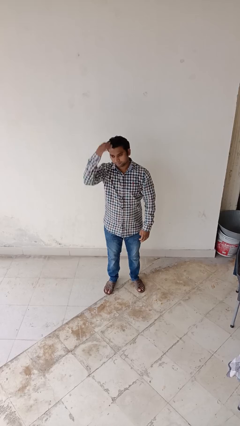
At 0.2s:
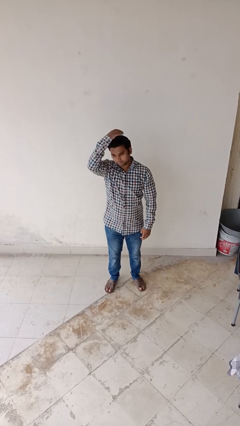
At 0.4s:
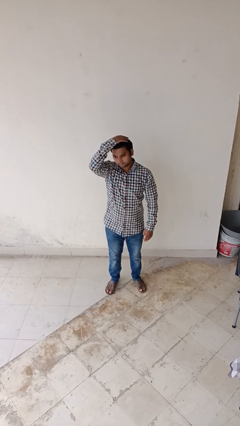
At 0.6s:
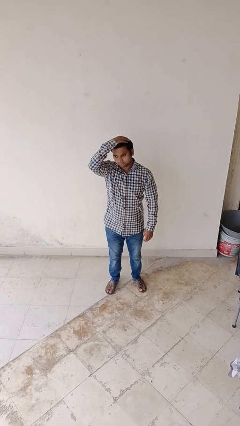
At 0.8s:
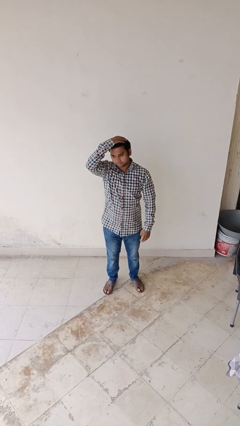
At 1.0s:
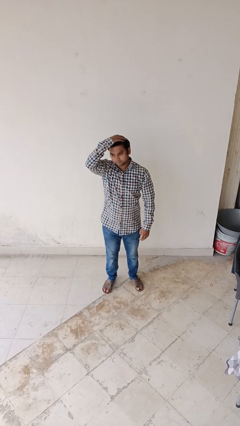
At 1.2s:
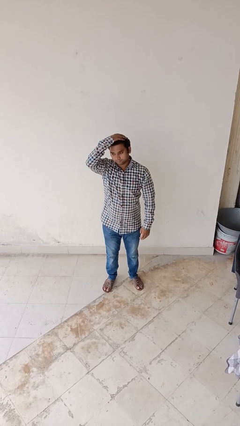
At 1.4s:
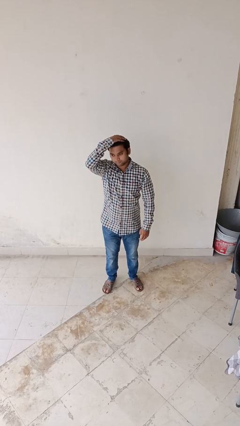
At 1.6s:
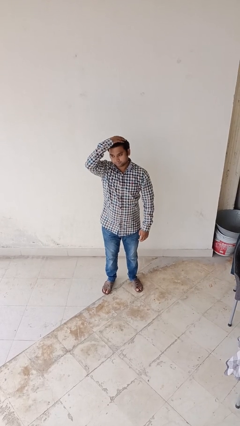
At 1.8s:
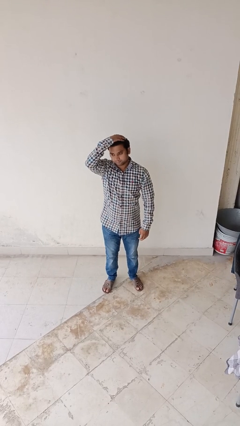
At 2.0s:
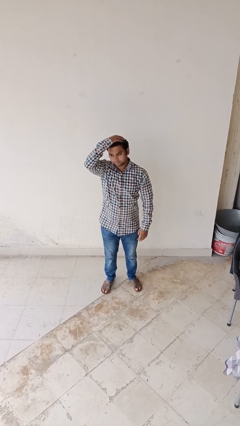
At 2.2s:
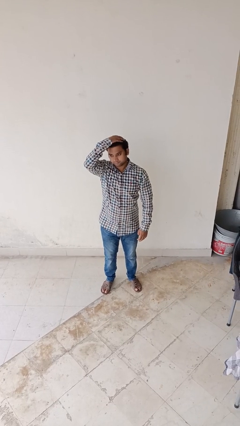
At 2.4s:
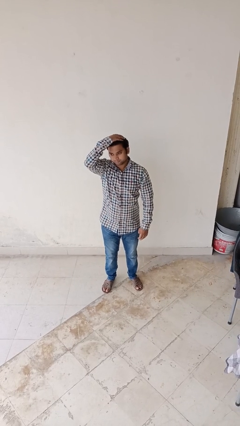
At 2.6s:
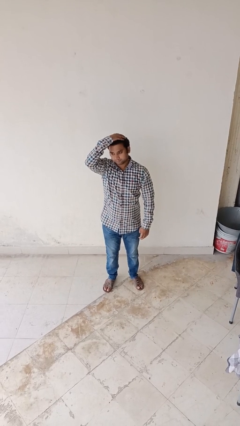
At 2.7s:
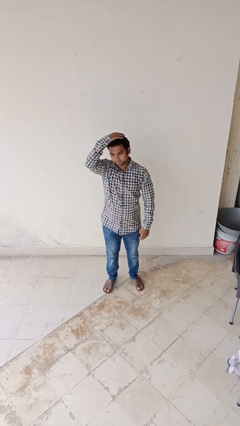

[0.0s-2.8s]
person pats head

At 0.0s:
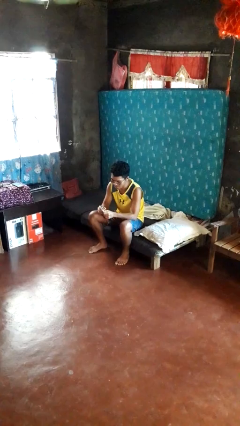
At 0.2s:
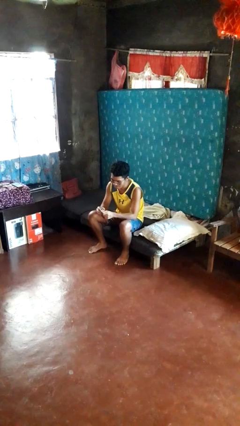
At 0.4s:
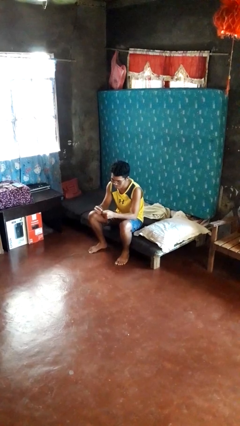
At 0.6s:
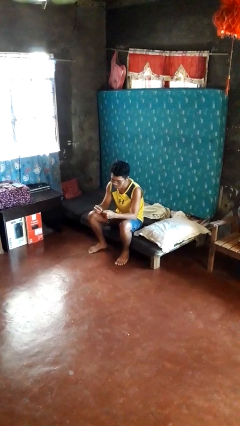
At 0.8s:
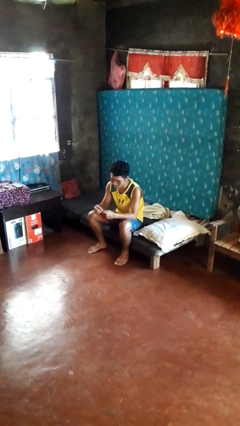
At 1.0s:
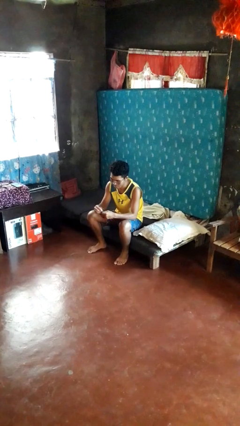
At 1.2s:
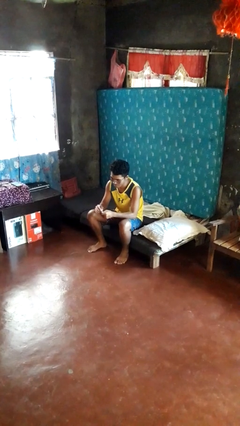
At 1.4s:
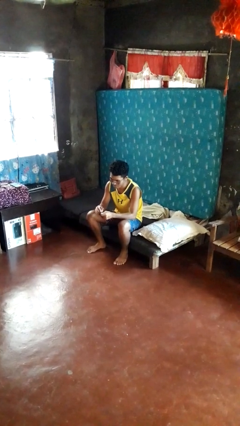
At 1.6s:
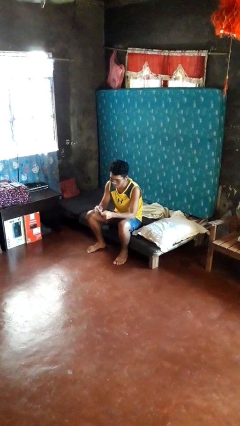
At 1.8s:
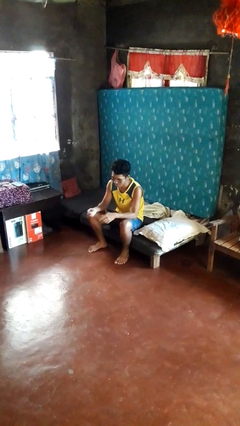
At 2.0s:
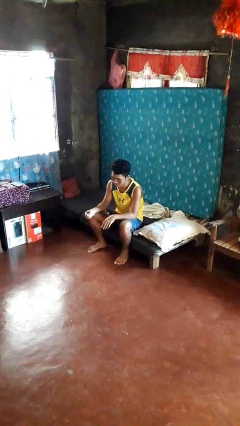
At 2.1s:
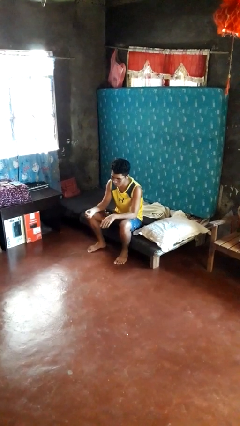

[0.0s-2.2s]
person files fingernails

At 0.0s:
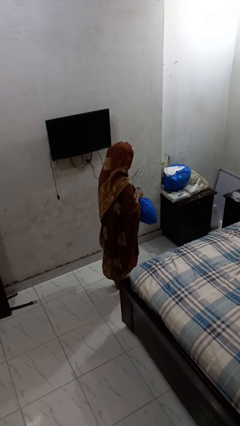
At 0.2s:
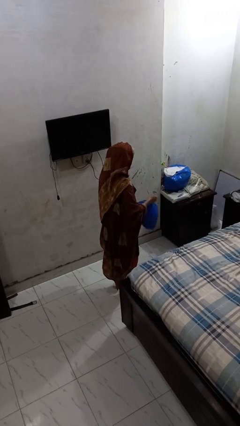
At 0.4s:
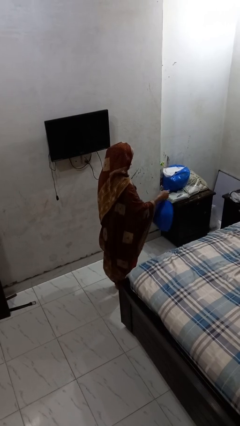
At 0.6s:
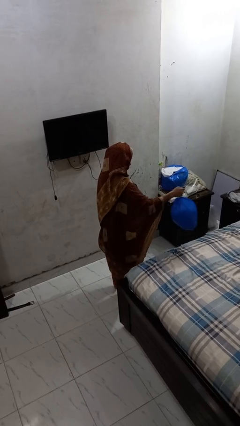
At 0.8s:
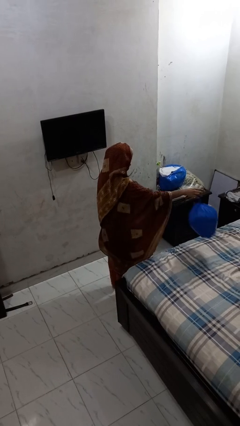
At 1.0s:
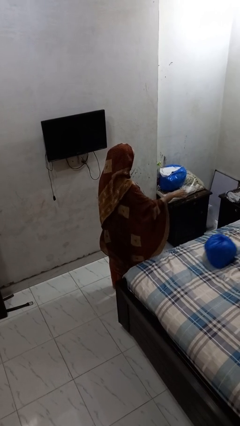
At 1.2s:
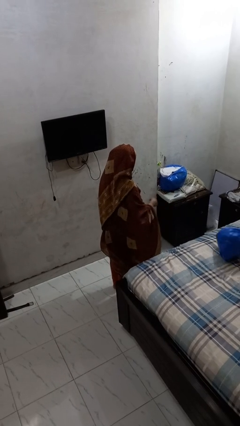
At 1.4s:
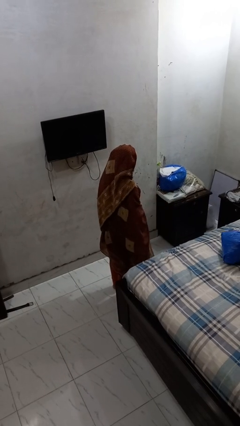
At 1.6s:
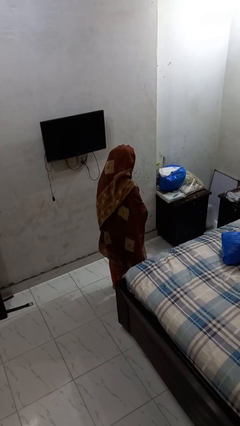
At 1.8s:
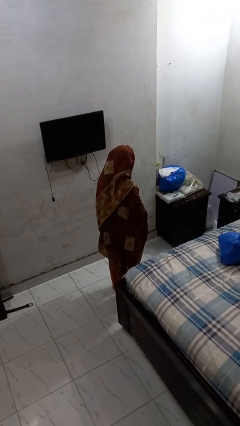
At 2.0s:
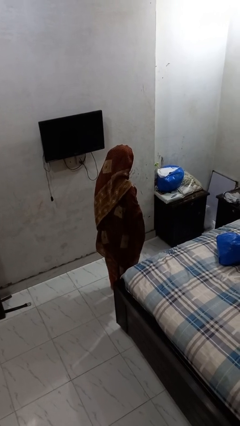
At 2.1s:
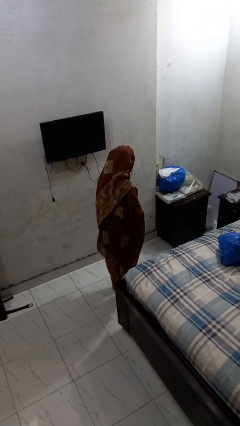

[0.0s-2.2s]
person throws object on bed

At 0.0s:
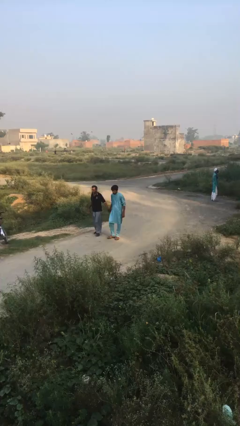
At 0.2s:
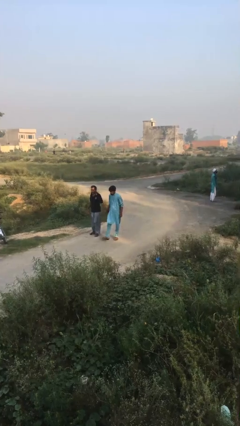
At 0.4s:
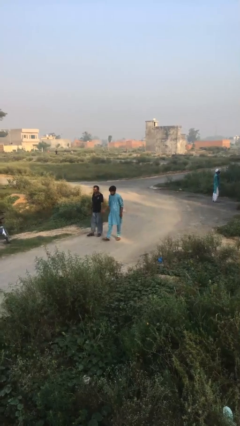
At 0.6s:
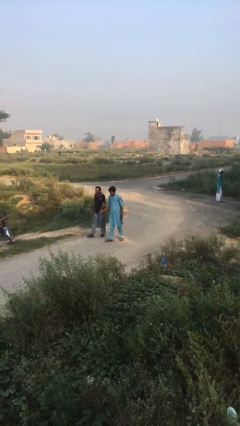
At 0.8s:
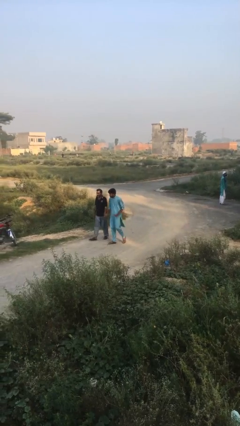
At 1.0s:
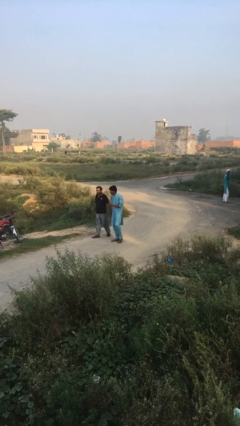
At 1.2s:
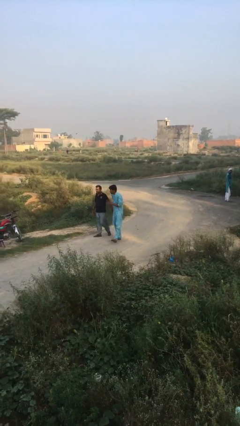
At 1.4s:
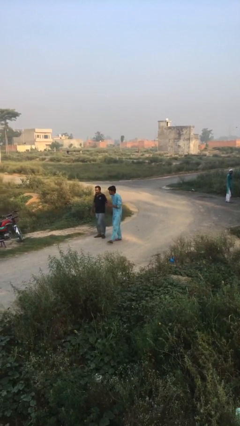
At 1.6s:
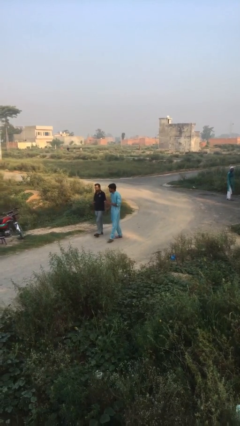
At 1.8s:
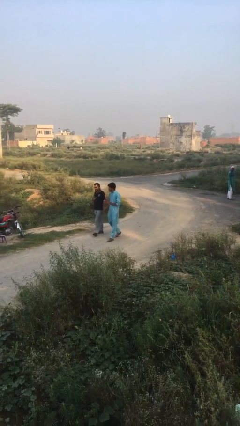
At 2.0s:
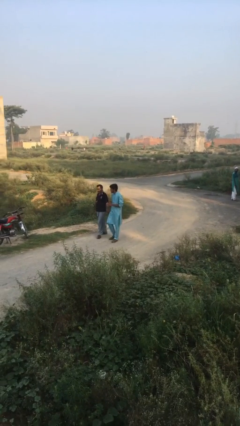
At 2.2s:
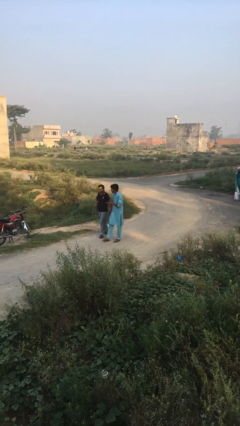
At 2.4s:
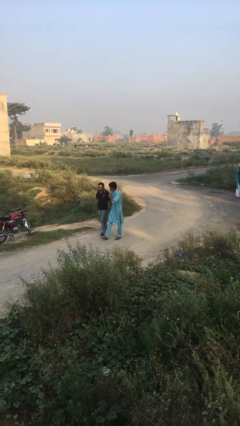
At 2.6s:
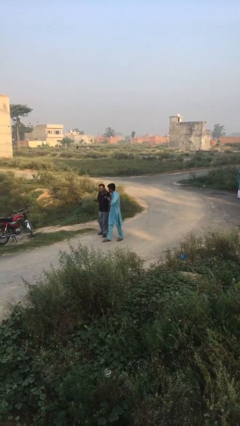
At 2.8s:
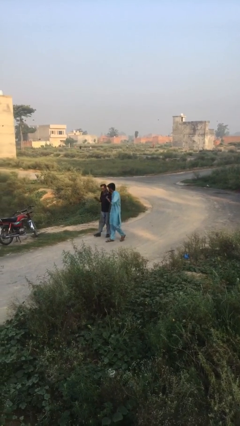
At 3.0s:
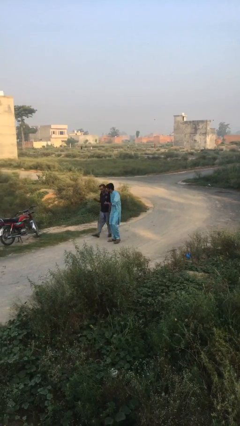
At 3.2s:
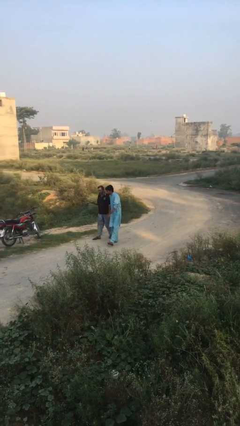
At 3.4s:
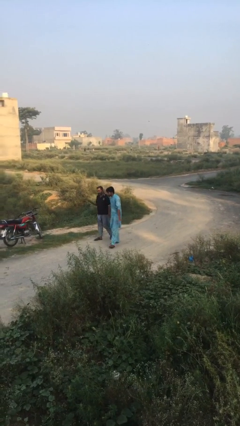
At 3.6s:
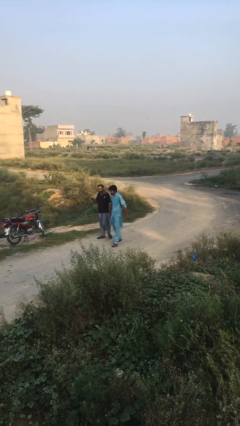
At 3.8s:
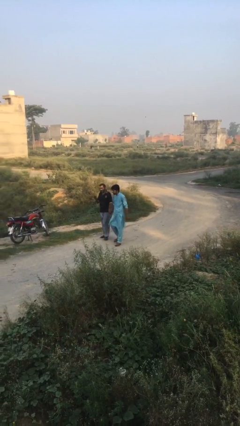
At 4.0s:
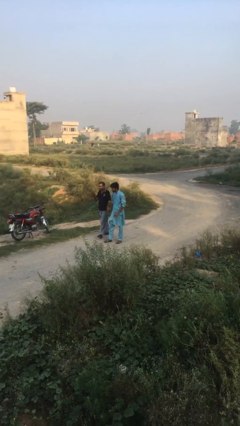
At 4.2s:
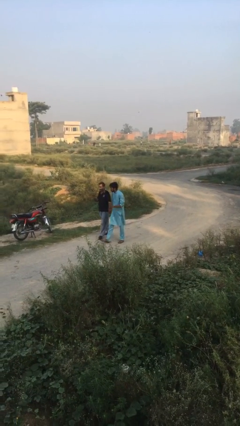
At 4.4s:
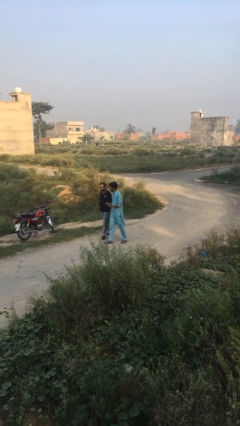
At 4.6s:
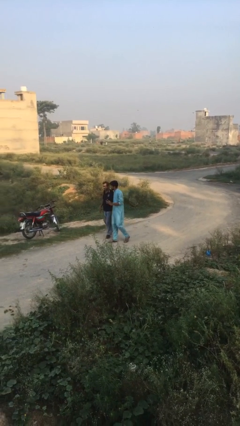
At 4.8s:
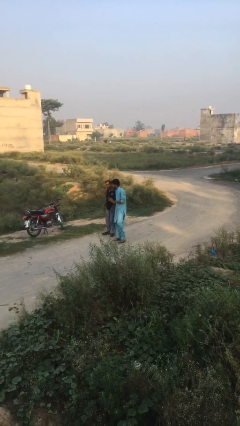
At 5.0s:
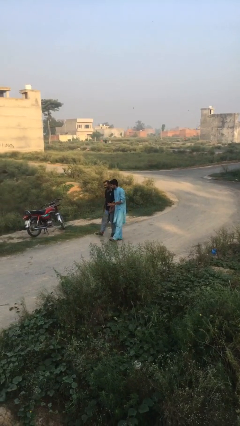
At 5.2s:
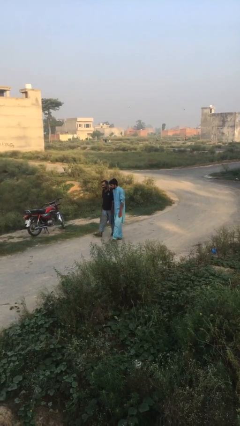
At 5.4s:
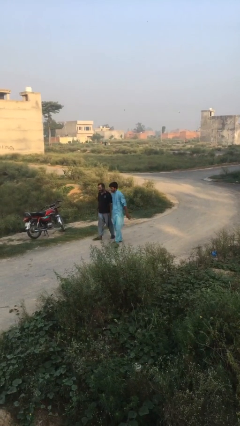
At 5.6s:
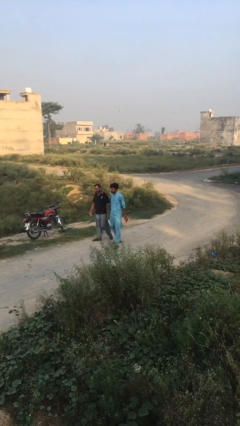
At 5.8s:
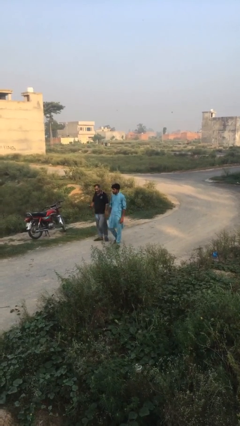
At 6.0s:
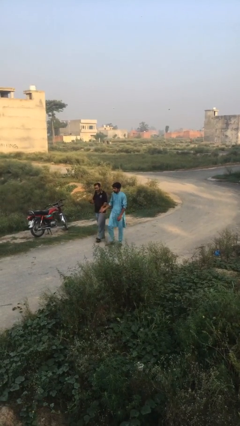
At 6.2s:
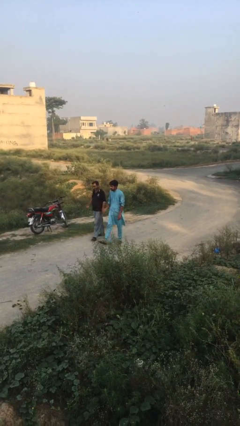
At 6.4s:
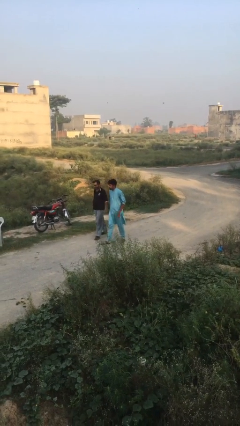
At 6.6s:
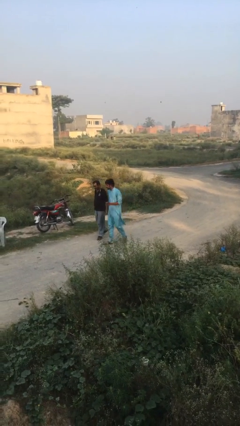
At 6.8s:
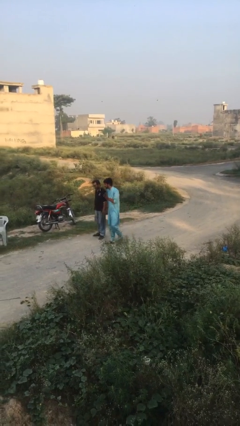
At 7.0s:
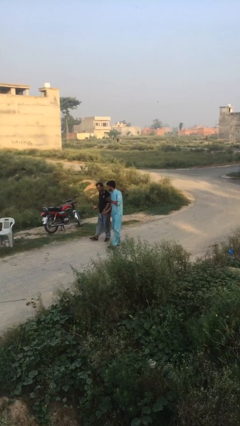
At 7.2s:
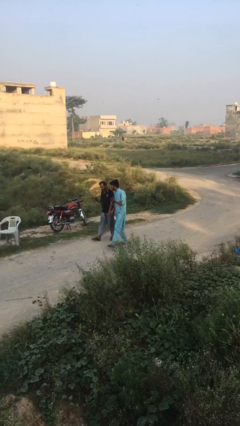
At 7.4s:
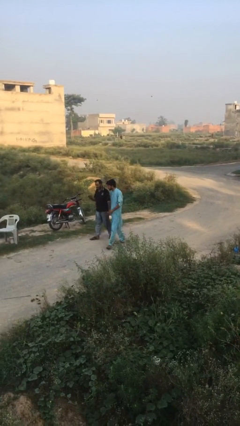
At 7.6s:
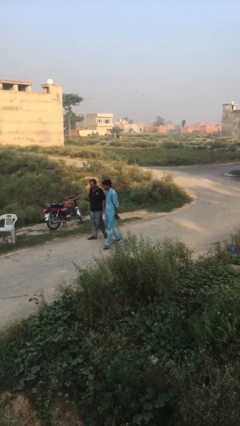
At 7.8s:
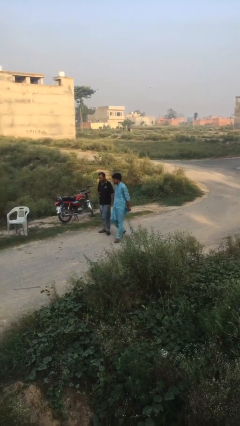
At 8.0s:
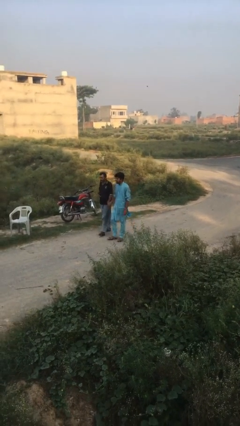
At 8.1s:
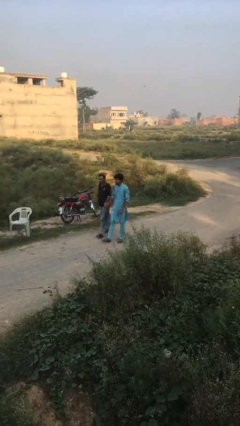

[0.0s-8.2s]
person holds hand

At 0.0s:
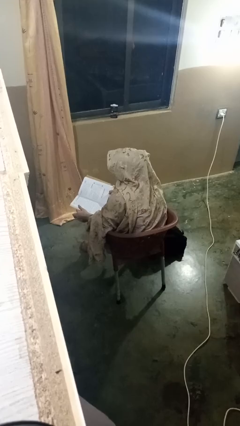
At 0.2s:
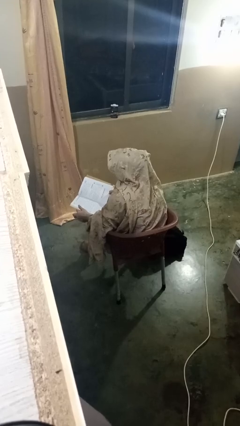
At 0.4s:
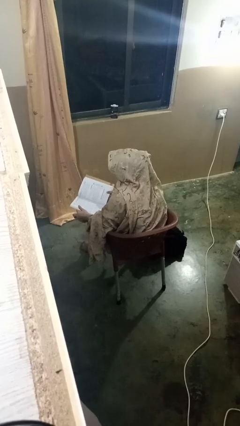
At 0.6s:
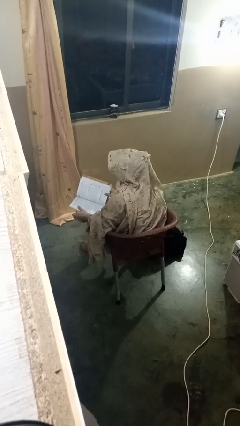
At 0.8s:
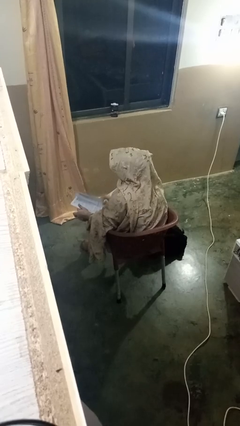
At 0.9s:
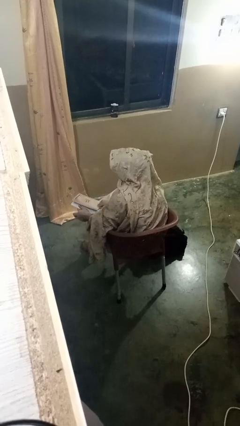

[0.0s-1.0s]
person reads book

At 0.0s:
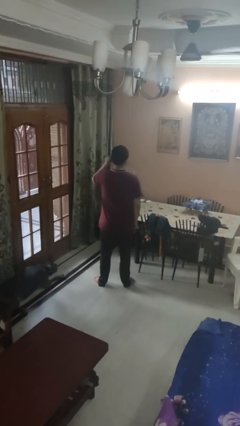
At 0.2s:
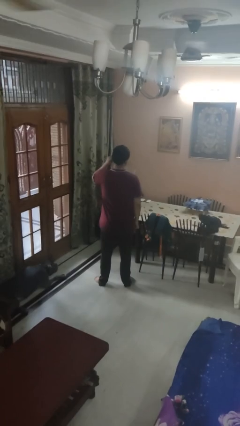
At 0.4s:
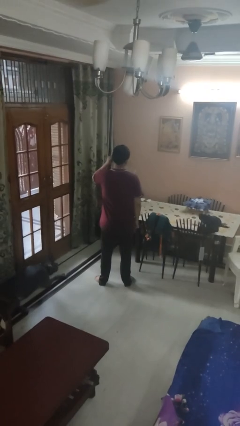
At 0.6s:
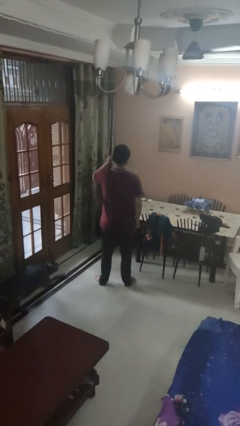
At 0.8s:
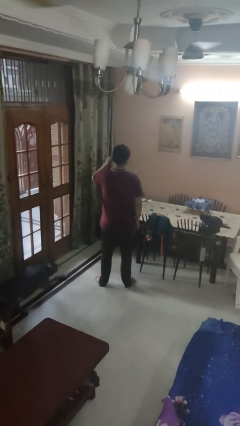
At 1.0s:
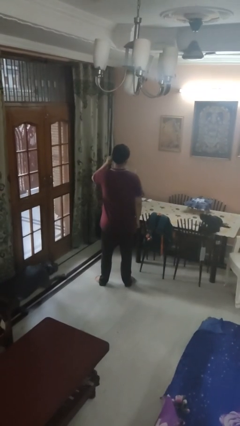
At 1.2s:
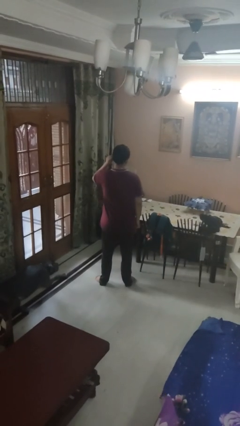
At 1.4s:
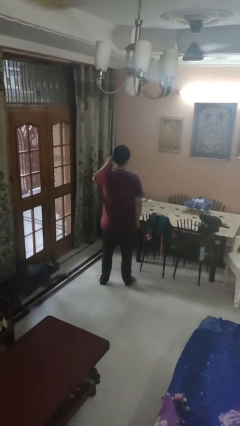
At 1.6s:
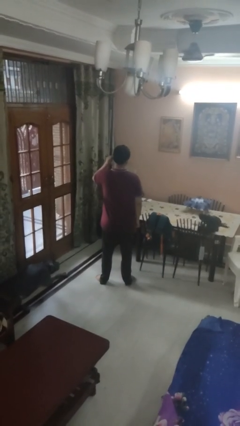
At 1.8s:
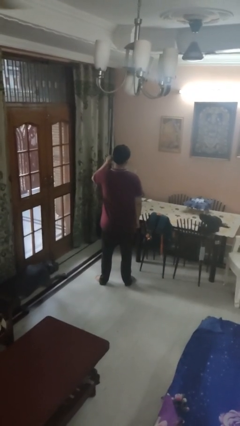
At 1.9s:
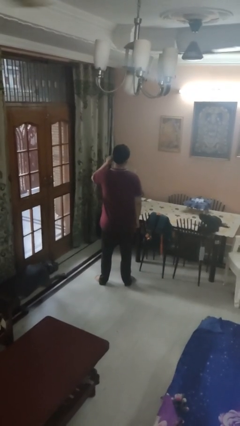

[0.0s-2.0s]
person touches earlobe
